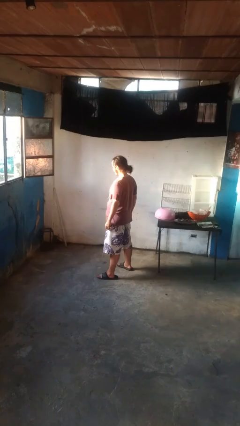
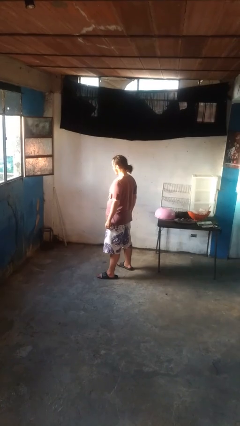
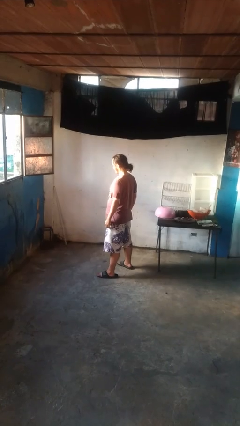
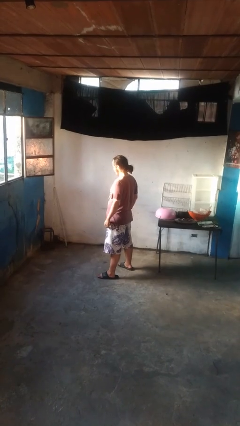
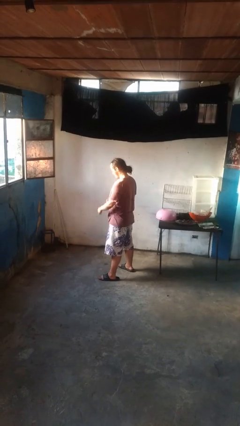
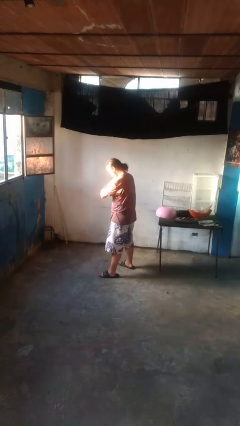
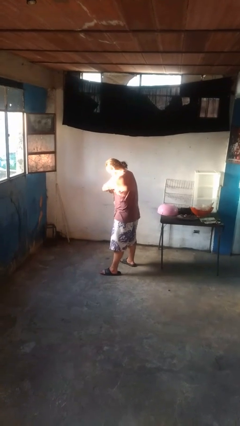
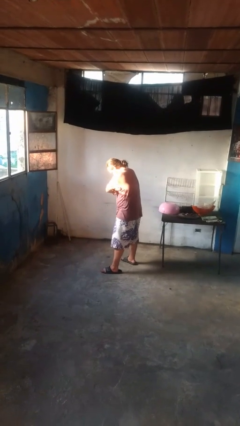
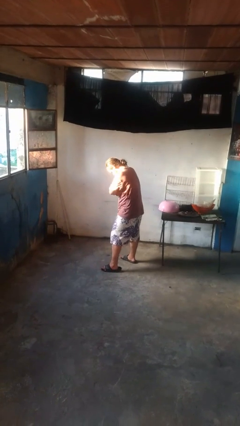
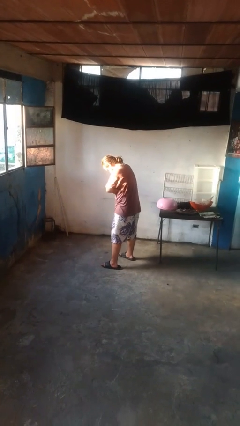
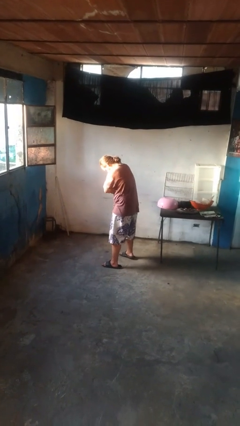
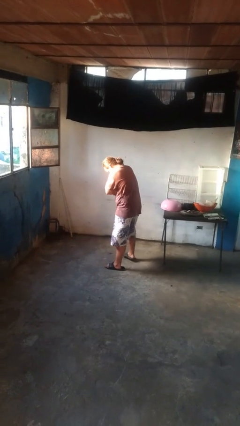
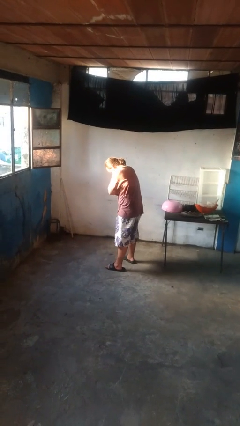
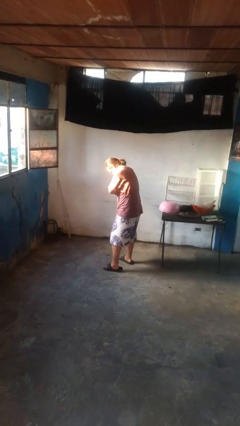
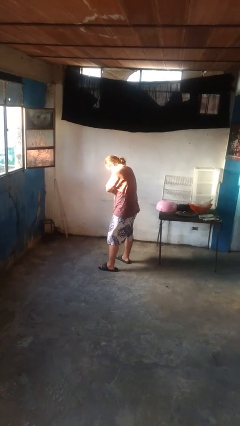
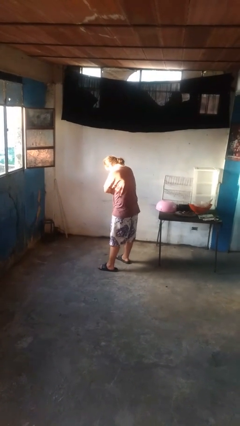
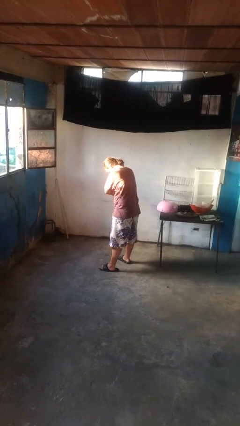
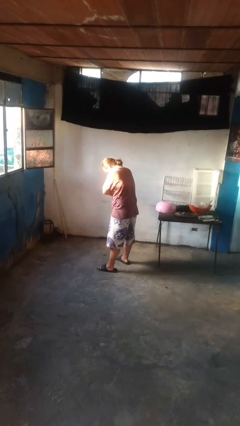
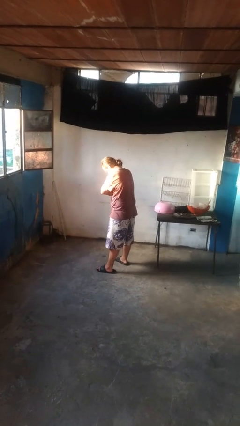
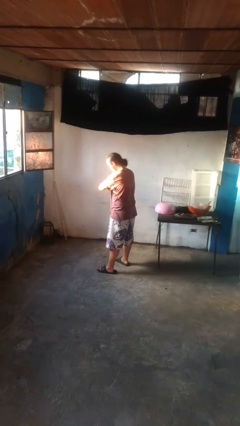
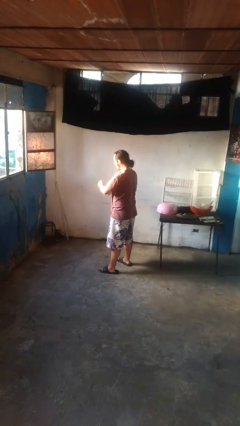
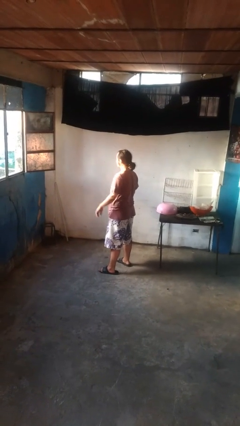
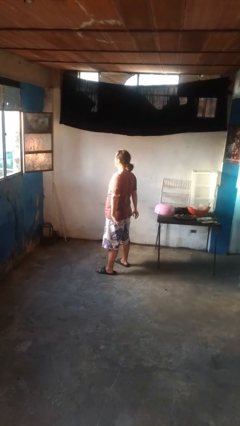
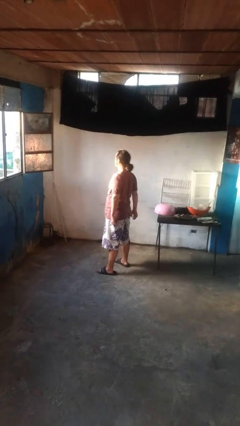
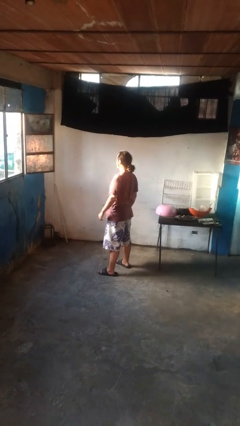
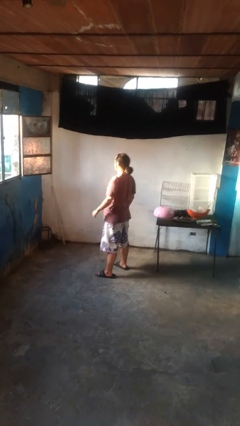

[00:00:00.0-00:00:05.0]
person gestures arms x

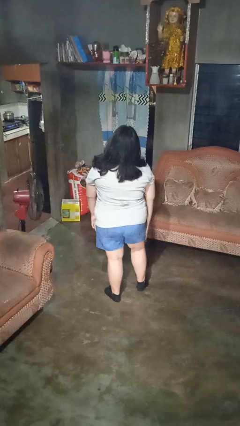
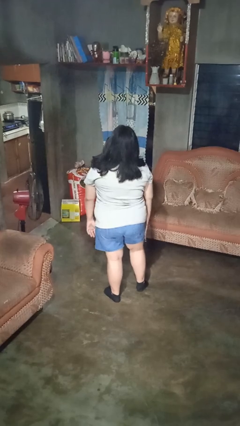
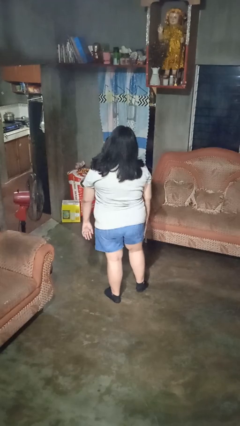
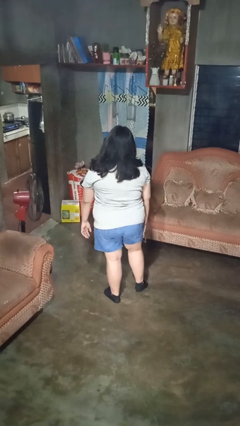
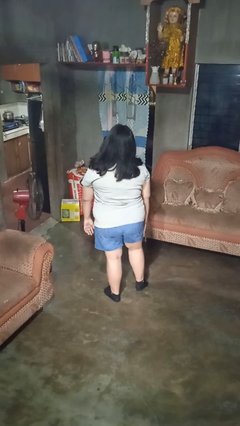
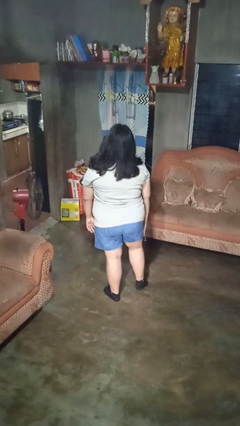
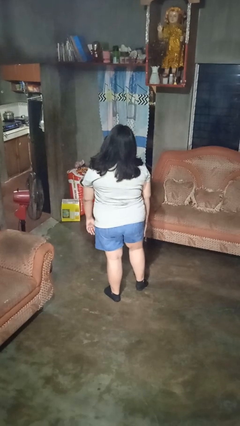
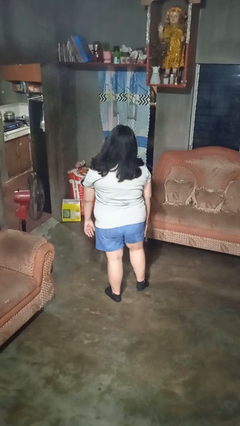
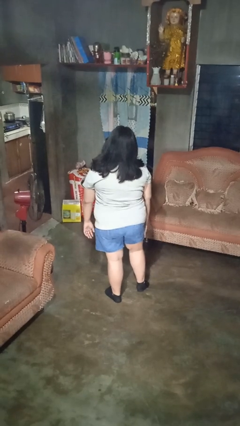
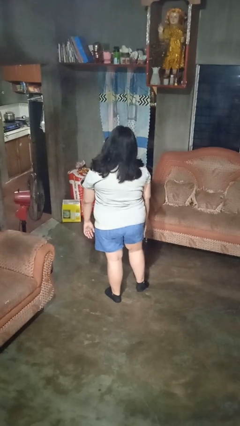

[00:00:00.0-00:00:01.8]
person swats bug

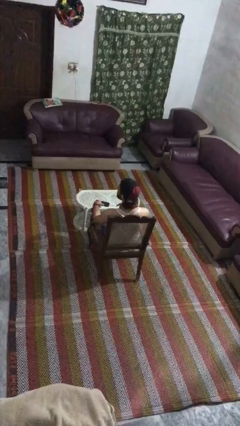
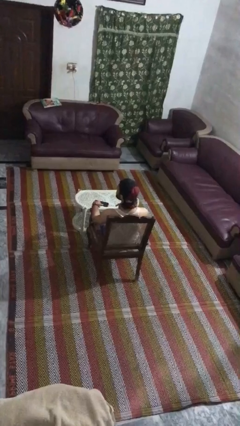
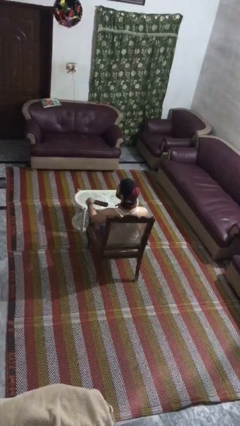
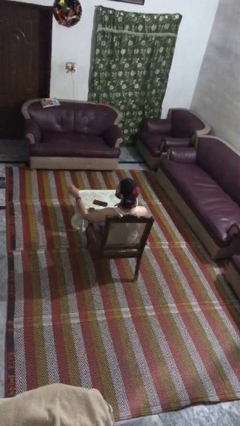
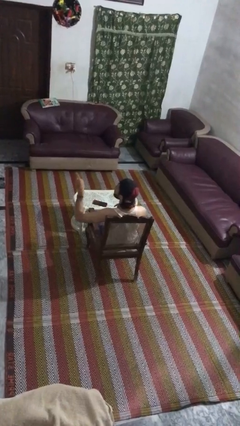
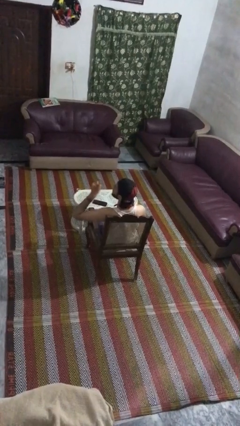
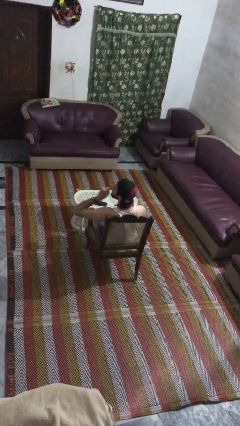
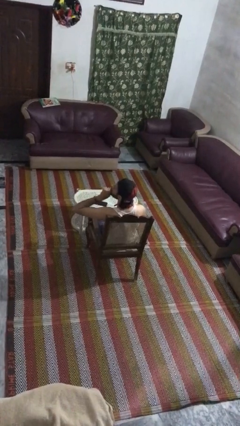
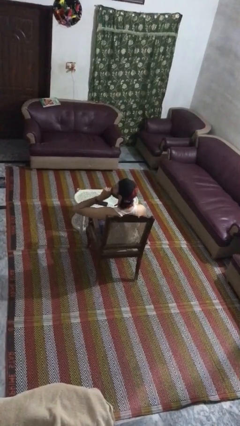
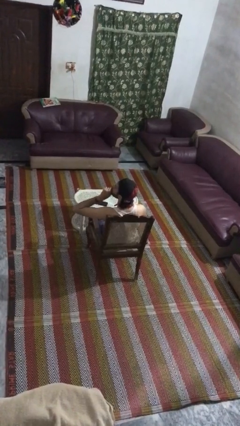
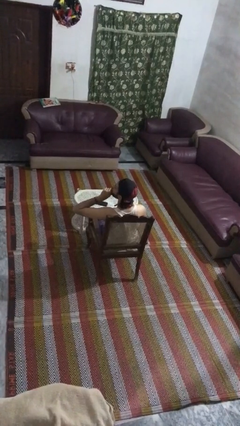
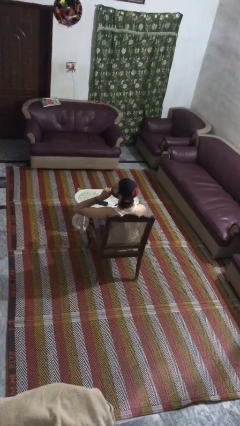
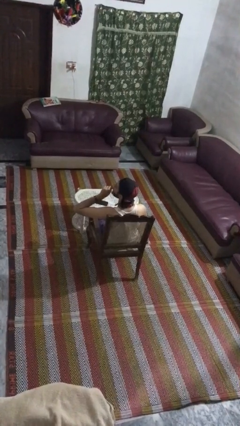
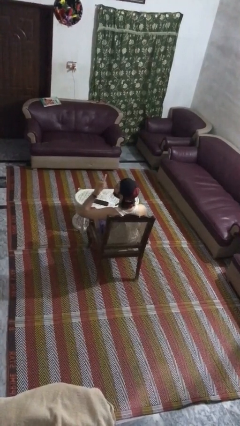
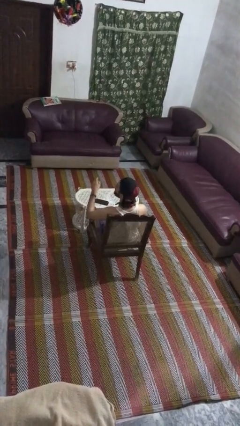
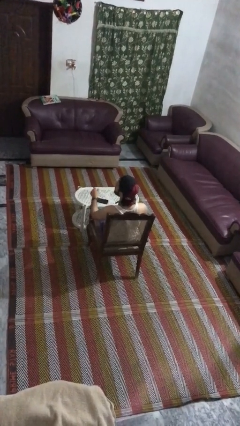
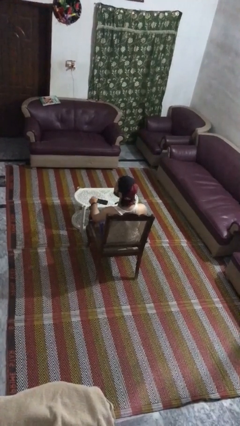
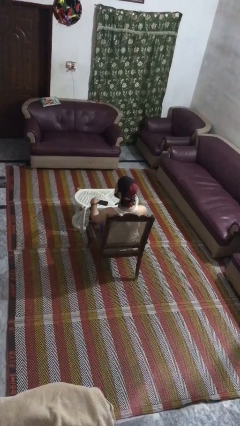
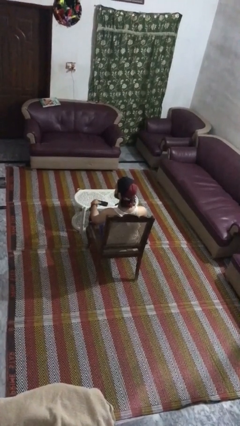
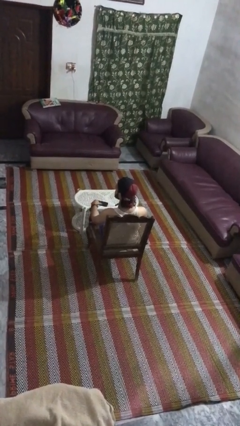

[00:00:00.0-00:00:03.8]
person gestures be quiet

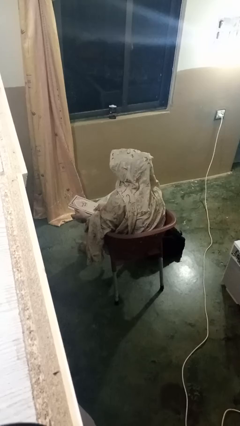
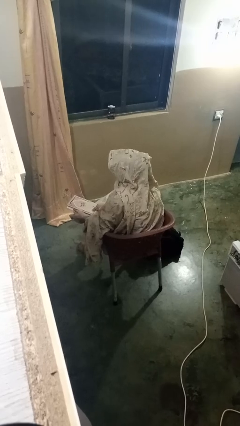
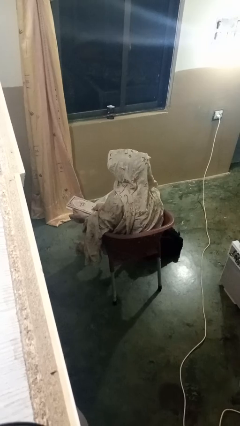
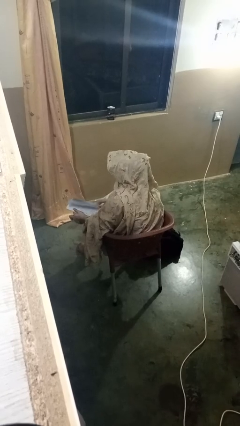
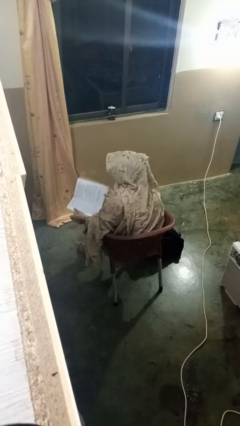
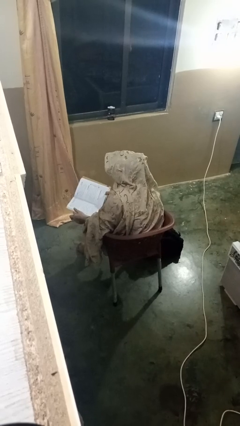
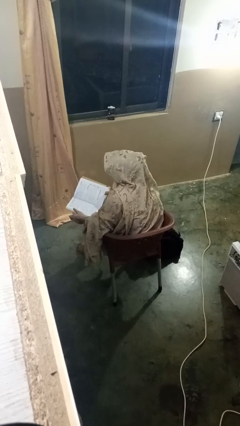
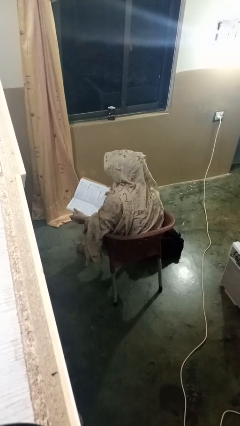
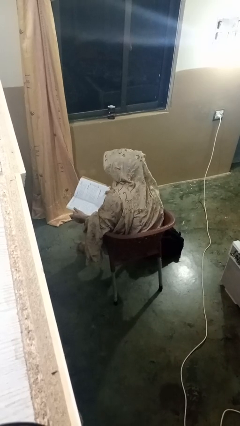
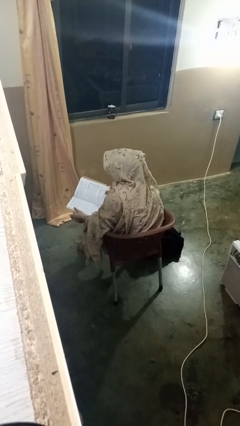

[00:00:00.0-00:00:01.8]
person reads book

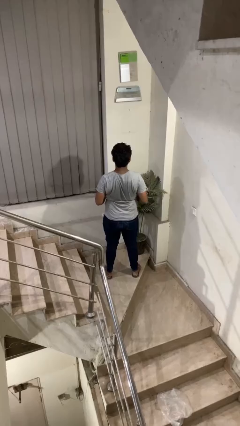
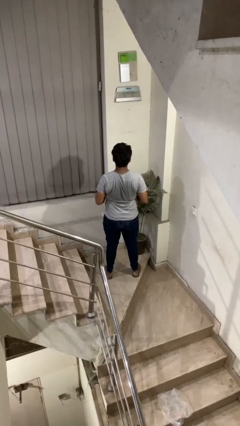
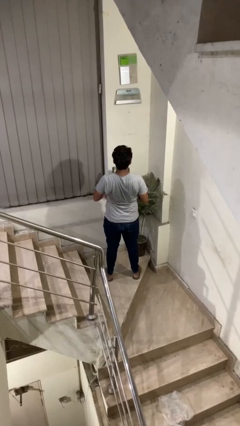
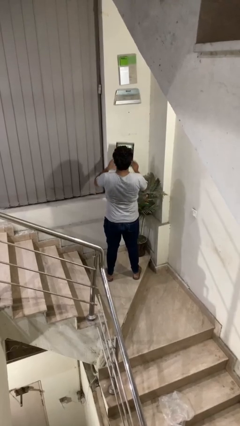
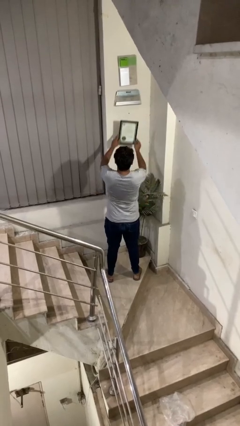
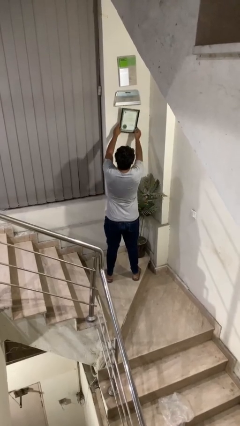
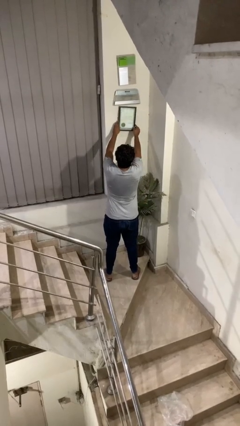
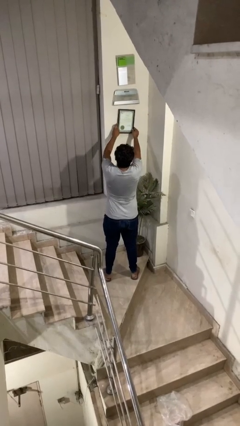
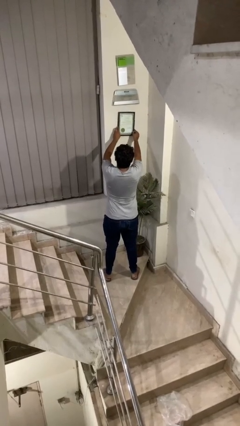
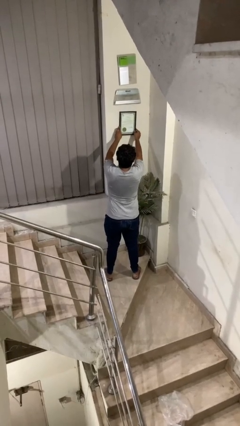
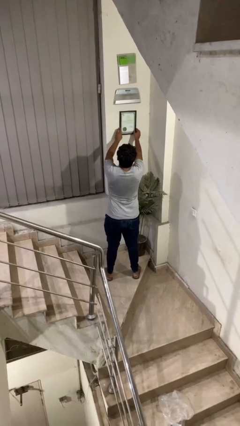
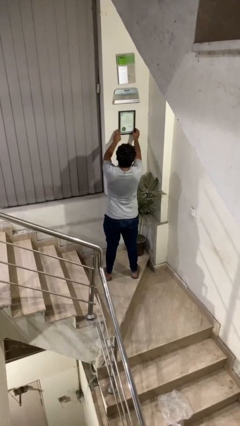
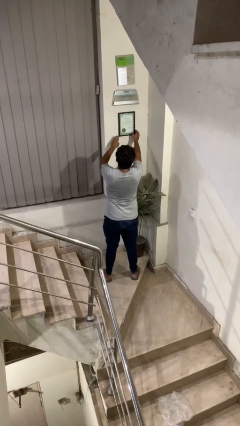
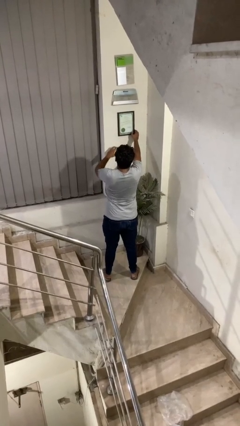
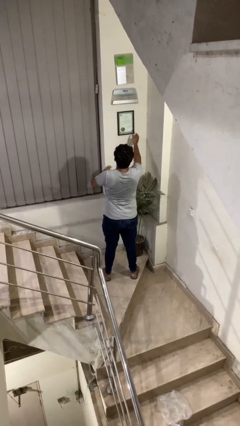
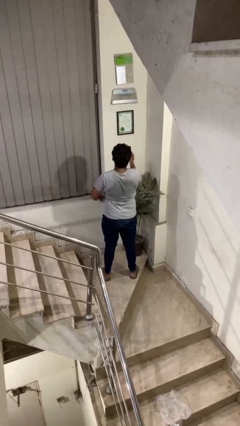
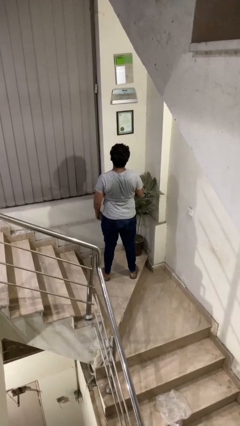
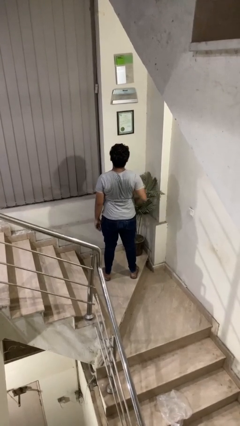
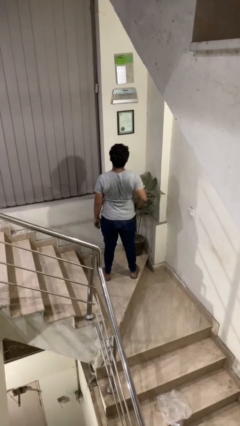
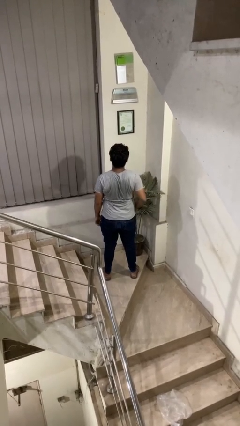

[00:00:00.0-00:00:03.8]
person puts up picture frame

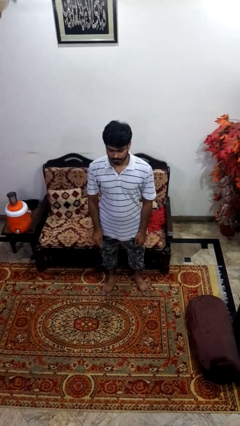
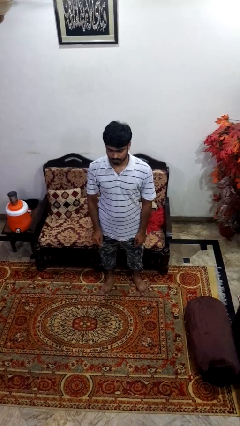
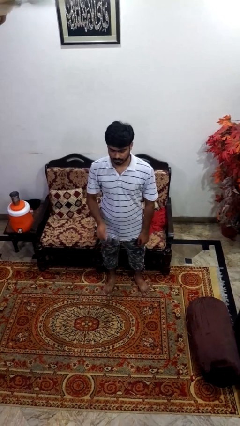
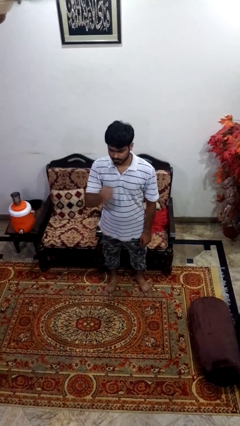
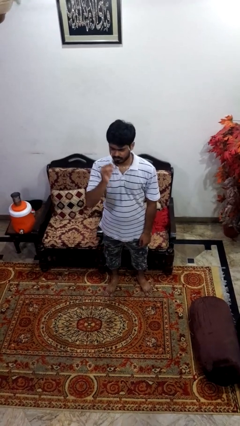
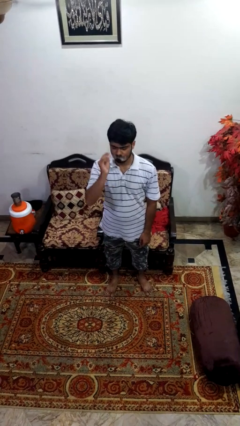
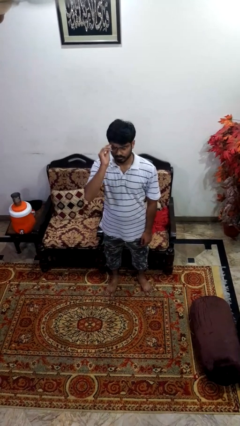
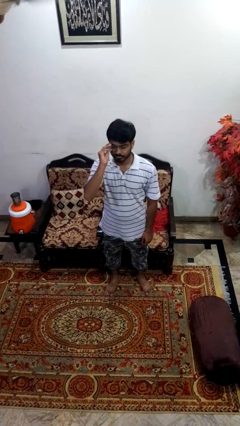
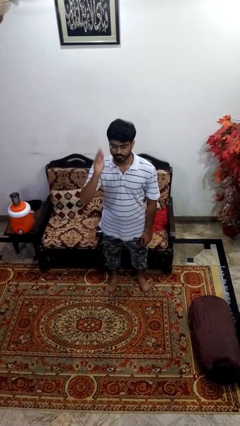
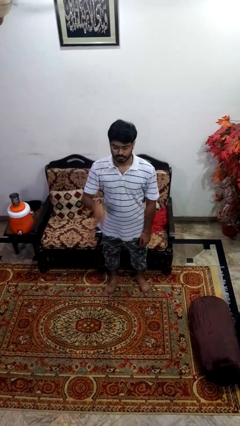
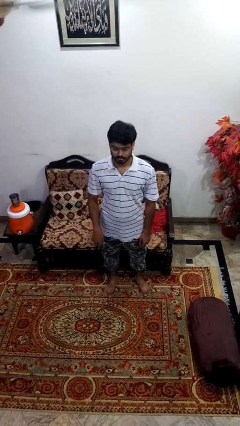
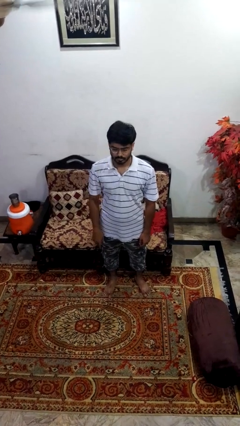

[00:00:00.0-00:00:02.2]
person puts on glasses
